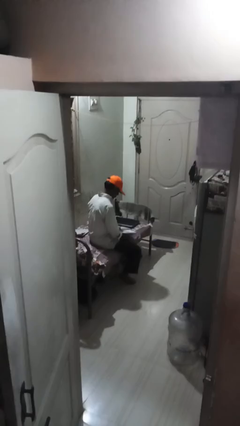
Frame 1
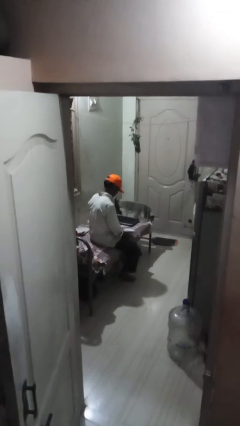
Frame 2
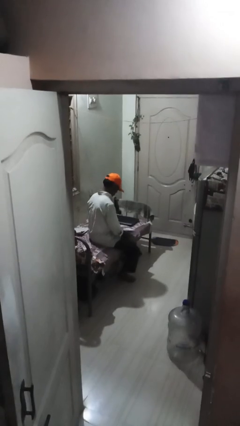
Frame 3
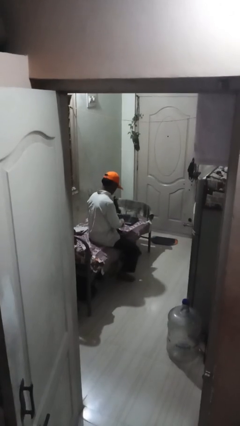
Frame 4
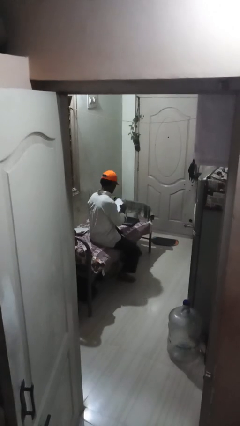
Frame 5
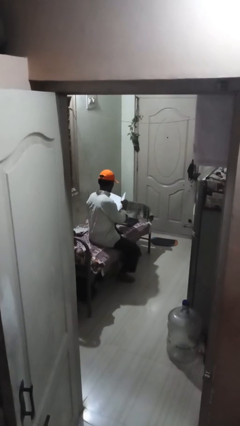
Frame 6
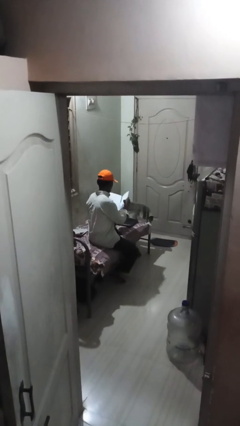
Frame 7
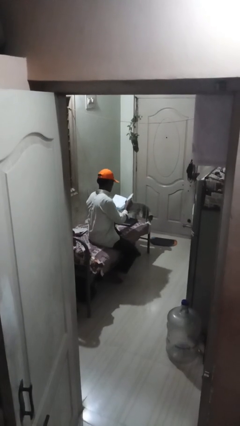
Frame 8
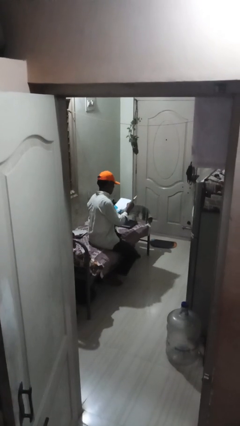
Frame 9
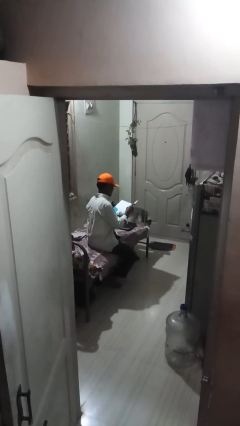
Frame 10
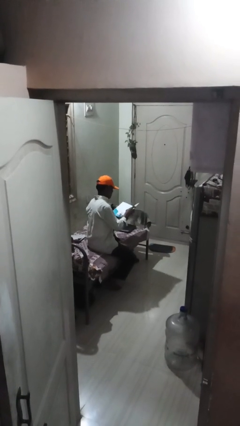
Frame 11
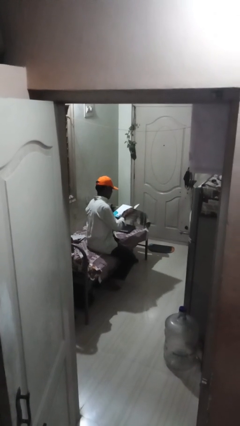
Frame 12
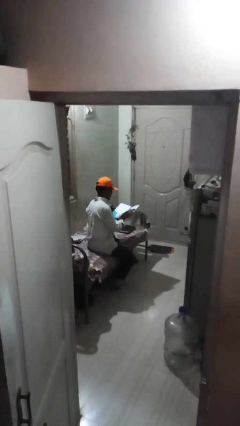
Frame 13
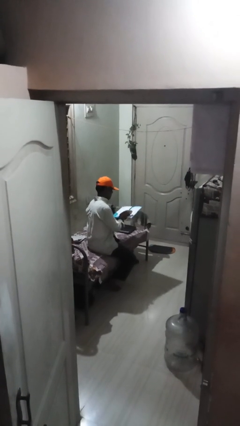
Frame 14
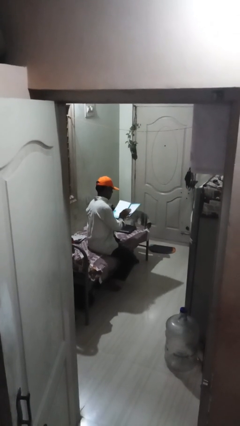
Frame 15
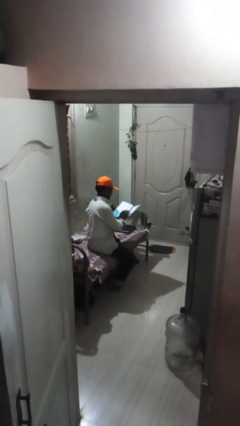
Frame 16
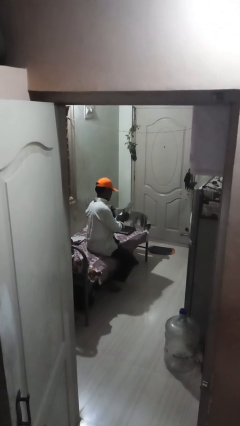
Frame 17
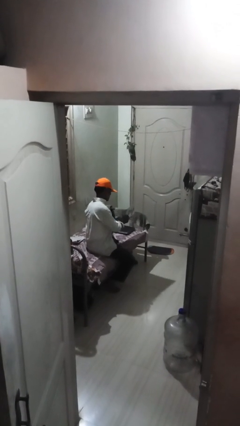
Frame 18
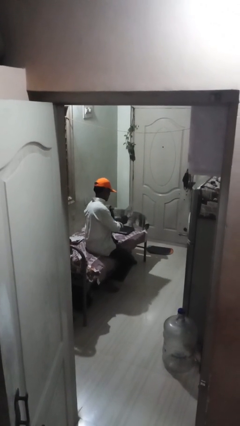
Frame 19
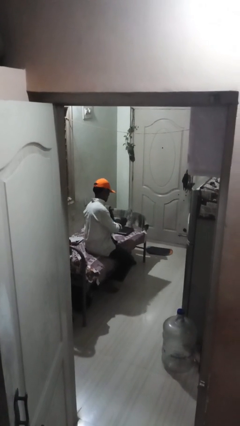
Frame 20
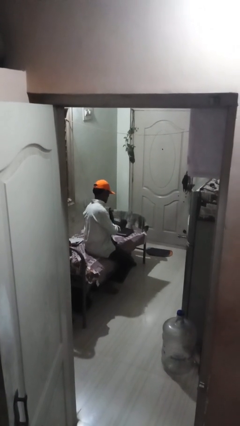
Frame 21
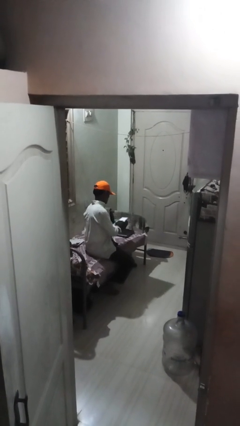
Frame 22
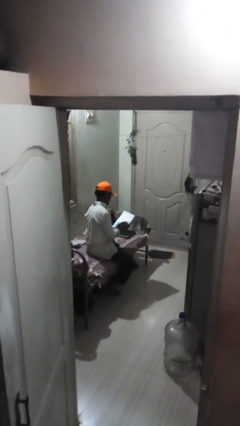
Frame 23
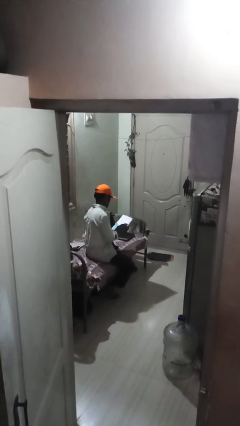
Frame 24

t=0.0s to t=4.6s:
person reads magazine

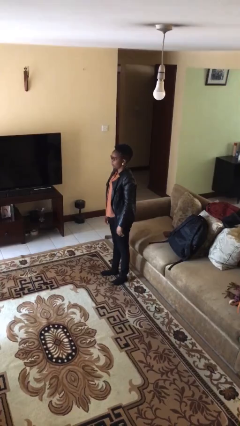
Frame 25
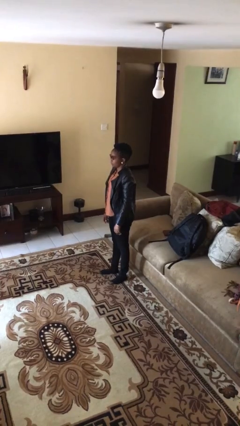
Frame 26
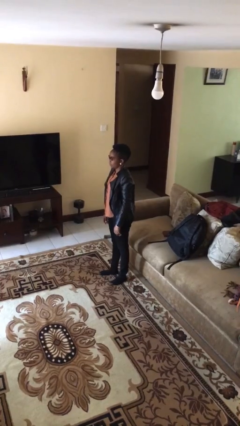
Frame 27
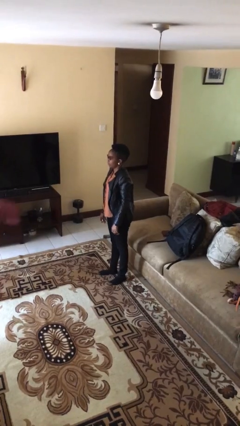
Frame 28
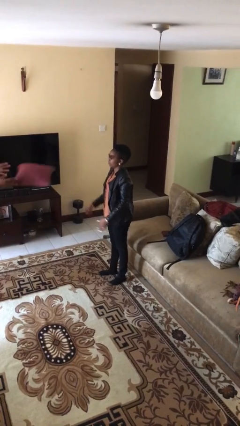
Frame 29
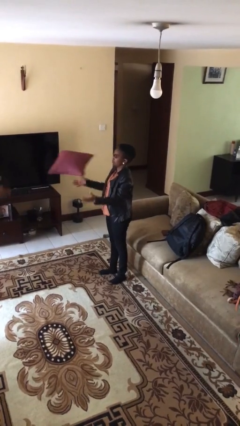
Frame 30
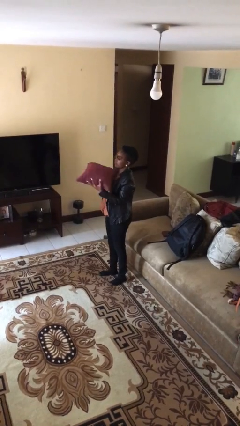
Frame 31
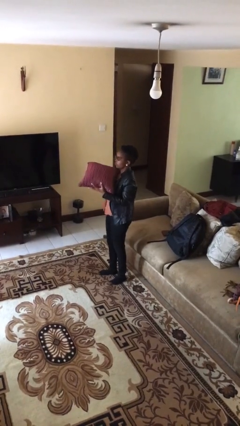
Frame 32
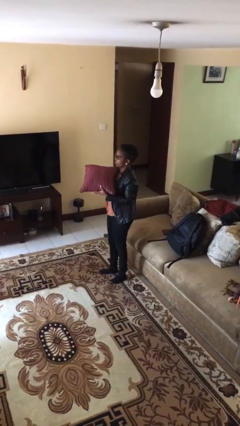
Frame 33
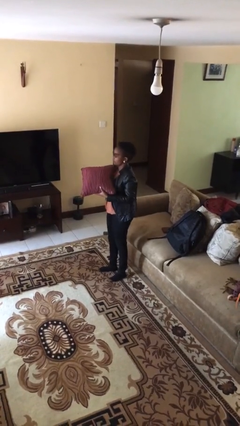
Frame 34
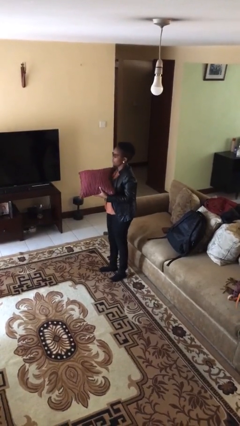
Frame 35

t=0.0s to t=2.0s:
person catches object from person

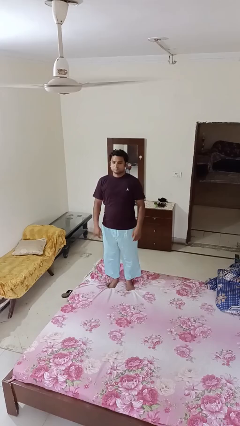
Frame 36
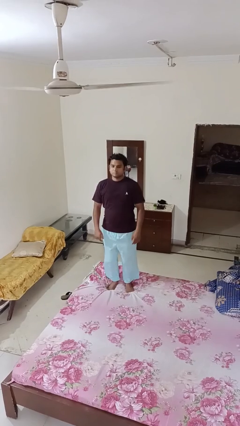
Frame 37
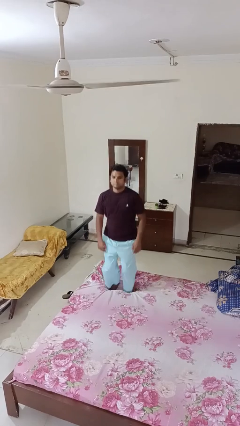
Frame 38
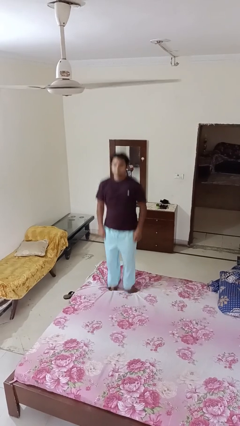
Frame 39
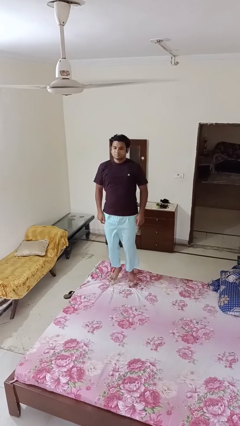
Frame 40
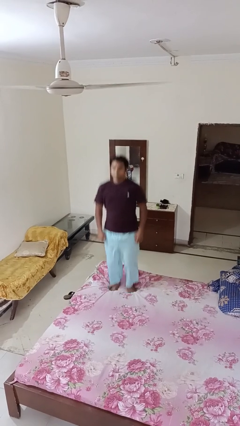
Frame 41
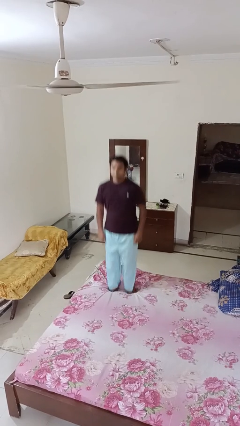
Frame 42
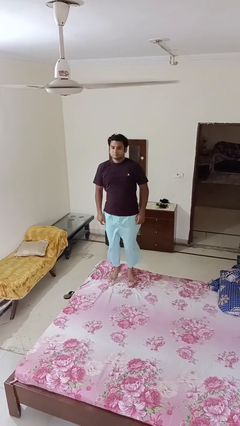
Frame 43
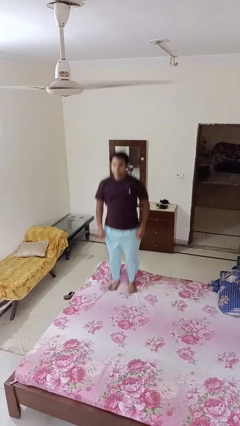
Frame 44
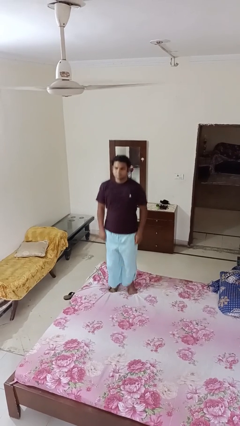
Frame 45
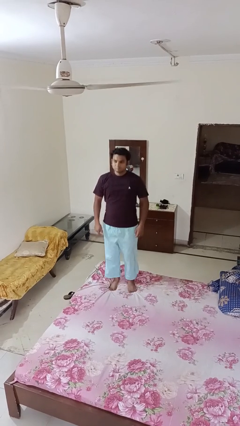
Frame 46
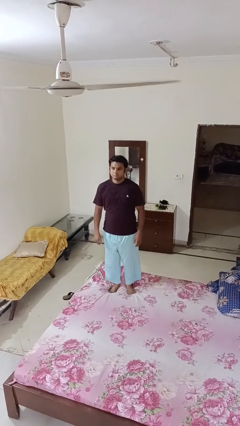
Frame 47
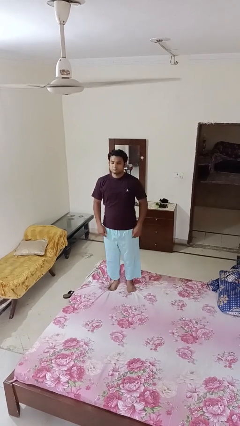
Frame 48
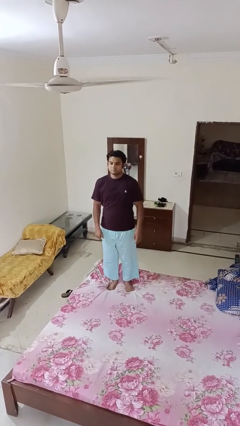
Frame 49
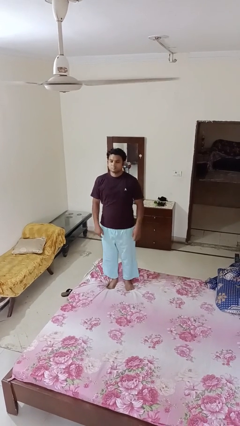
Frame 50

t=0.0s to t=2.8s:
person jumps on bed

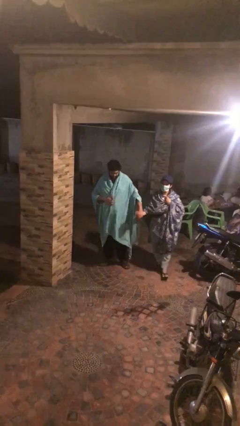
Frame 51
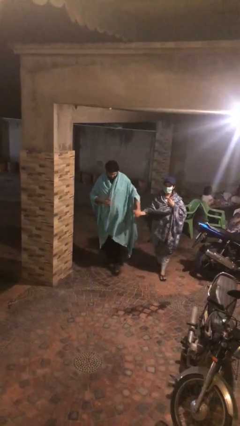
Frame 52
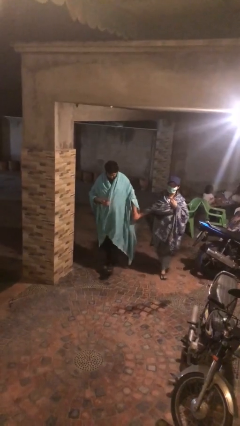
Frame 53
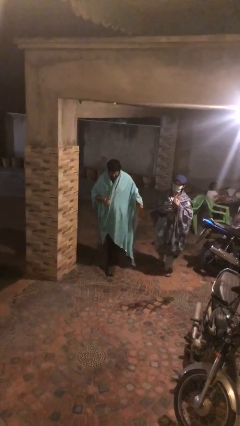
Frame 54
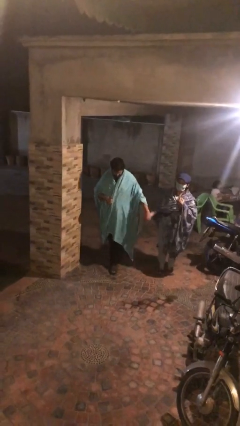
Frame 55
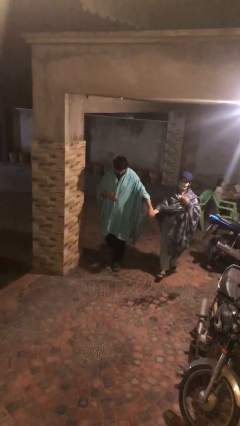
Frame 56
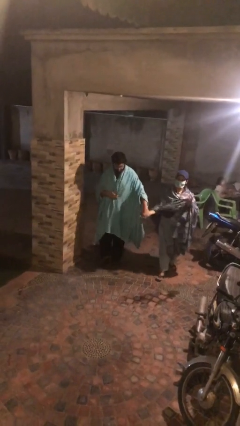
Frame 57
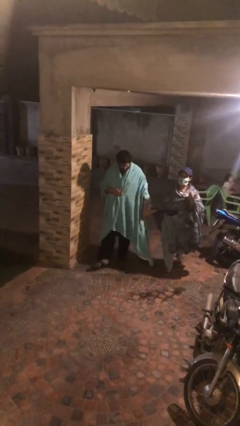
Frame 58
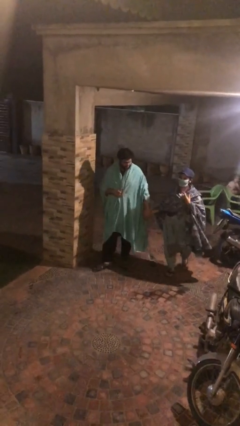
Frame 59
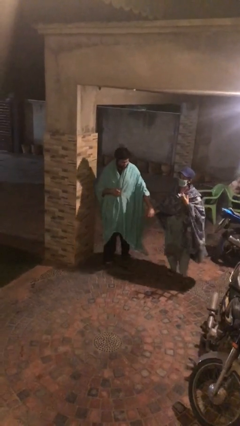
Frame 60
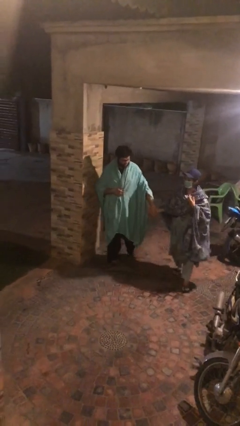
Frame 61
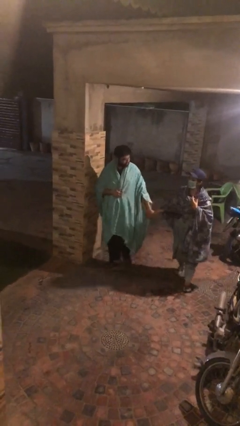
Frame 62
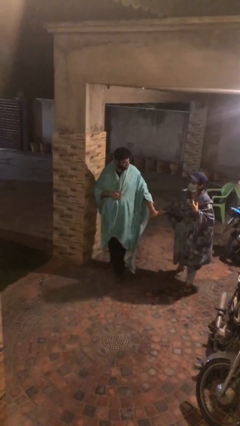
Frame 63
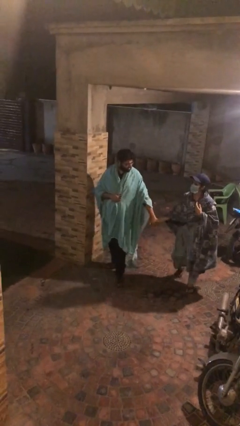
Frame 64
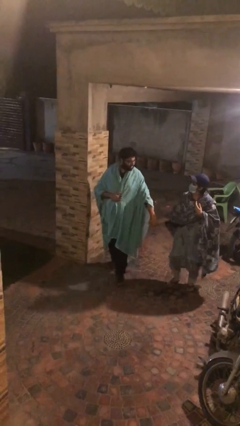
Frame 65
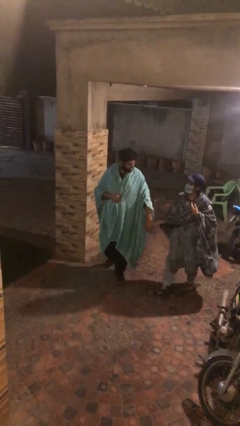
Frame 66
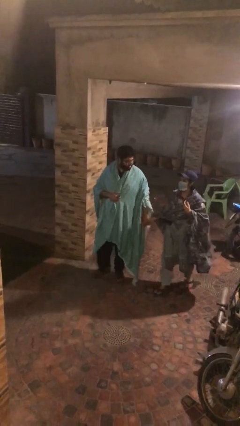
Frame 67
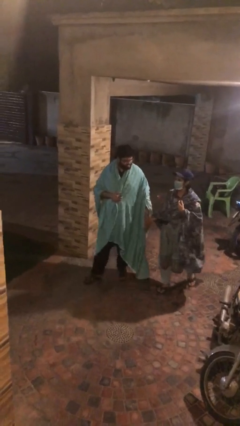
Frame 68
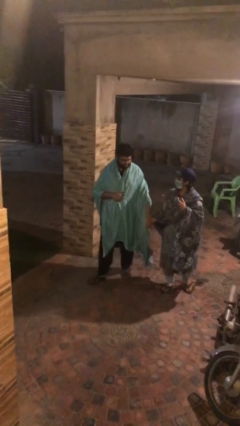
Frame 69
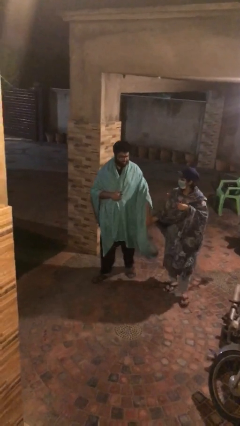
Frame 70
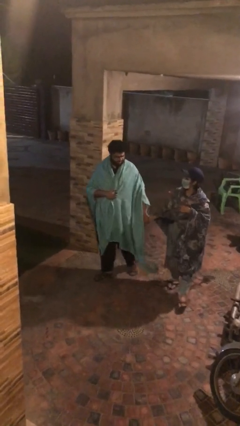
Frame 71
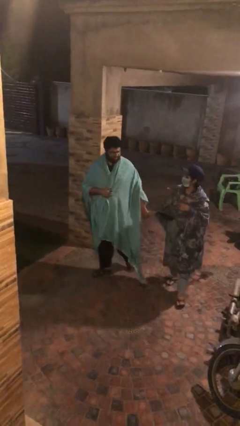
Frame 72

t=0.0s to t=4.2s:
person holds hand

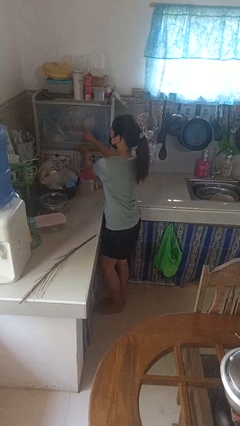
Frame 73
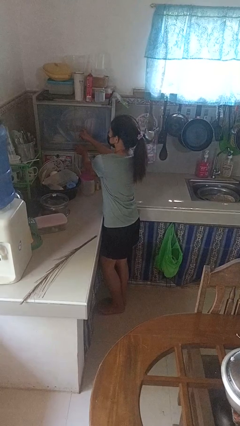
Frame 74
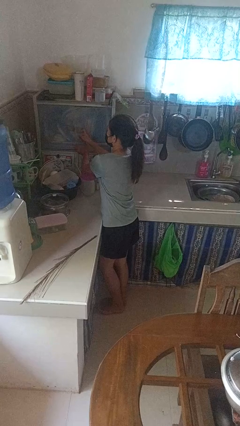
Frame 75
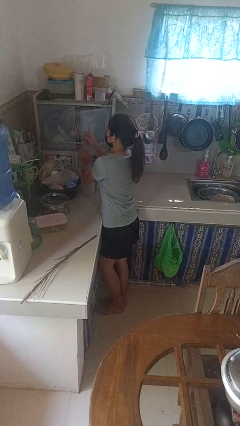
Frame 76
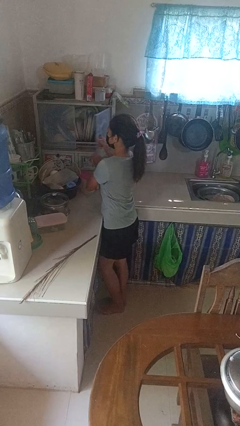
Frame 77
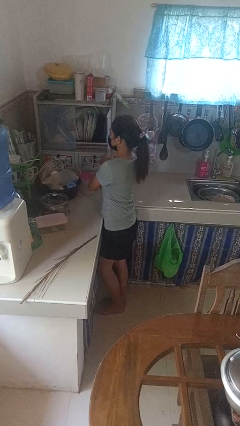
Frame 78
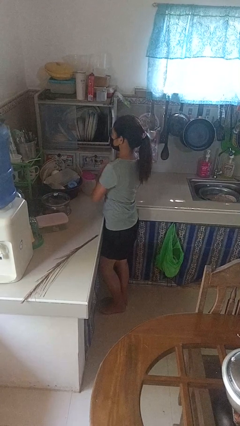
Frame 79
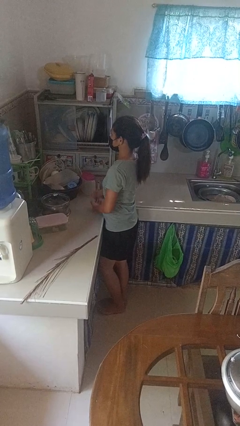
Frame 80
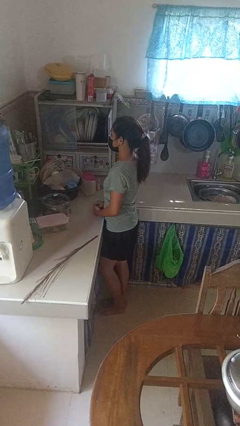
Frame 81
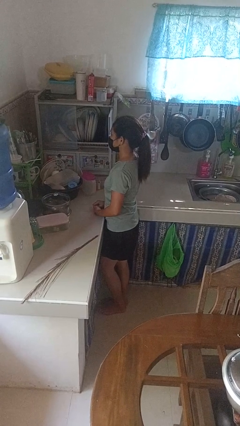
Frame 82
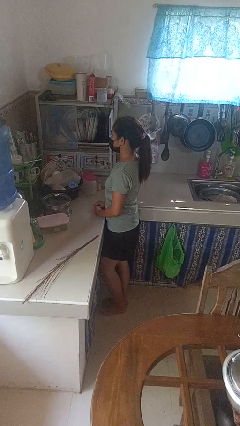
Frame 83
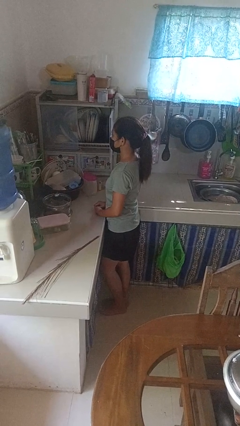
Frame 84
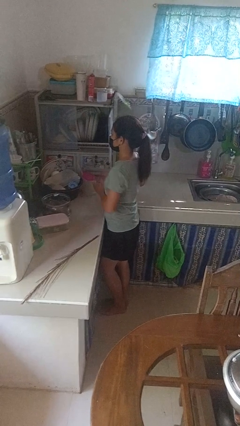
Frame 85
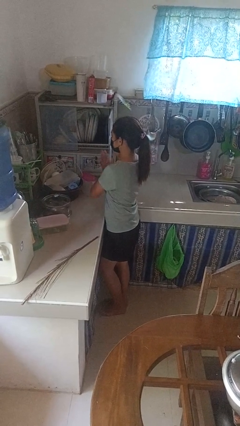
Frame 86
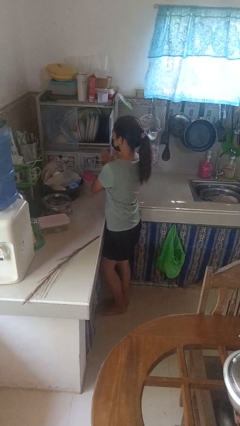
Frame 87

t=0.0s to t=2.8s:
person opens kitchen drawer

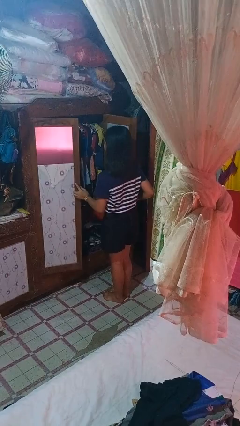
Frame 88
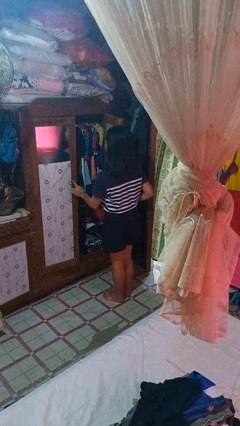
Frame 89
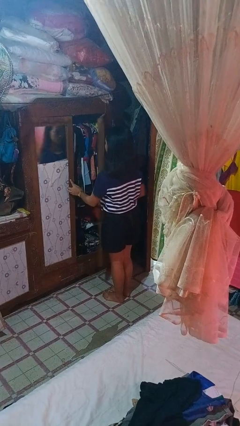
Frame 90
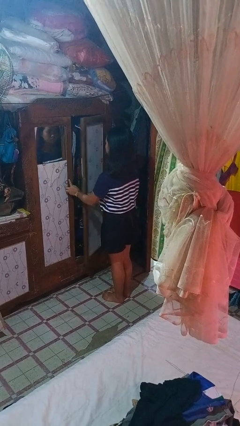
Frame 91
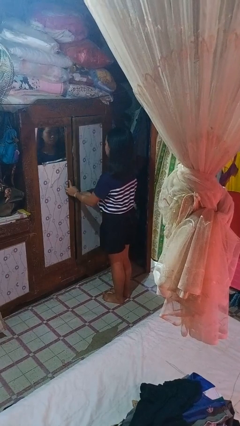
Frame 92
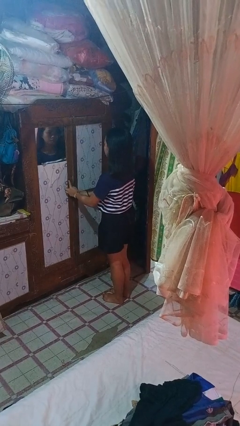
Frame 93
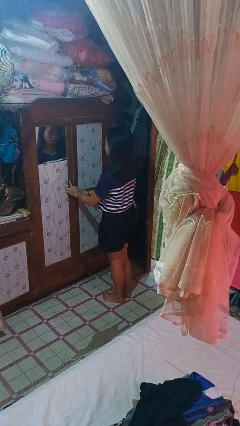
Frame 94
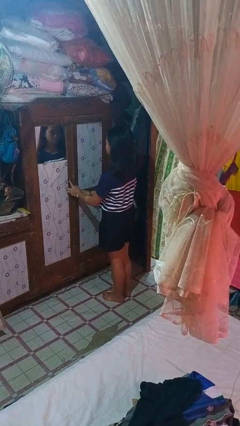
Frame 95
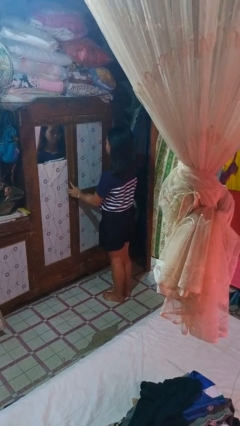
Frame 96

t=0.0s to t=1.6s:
person closes closet door
